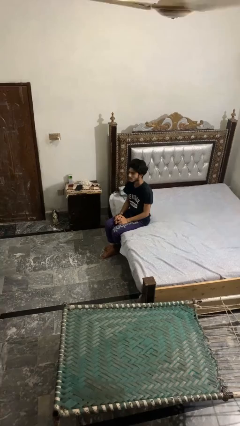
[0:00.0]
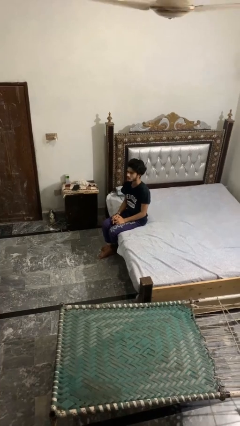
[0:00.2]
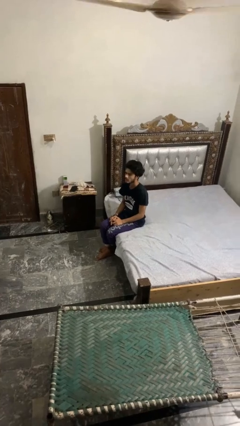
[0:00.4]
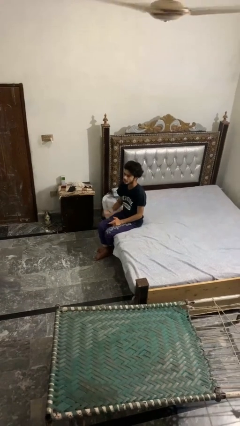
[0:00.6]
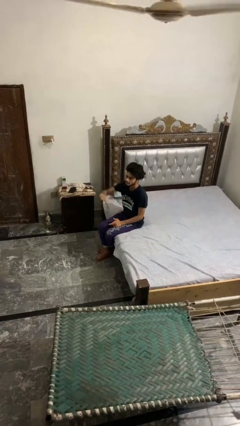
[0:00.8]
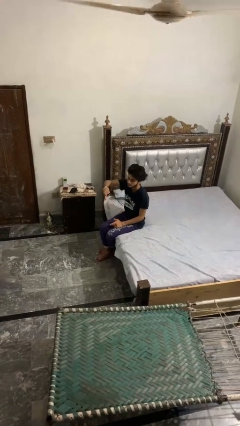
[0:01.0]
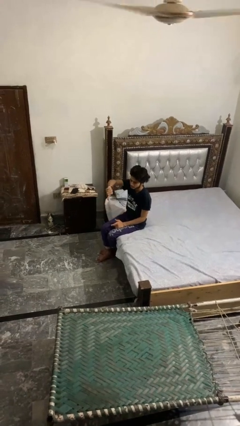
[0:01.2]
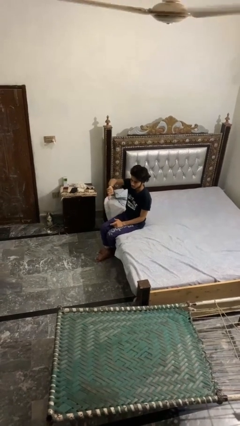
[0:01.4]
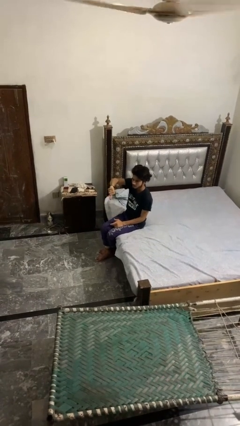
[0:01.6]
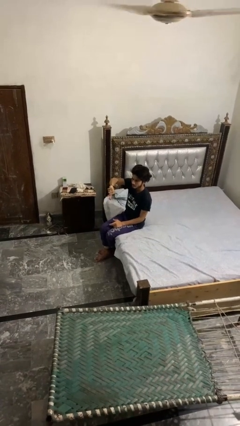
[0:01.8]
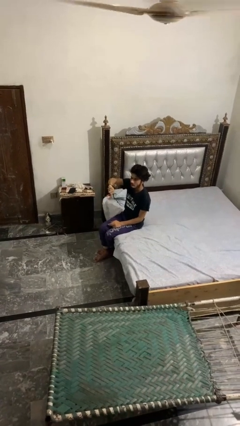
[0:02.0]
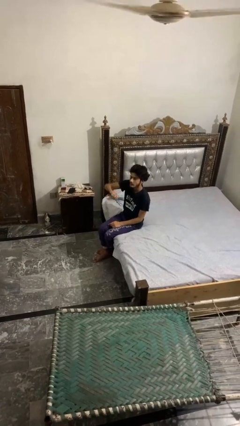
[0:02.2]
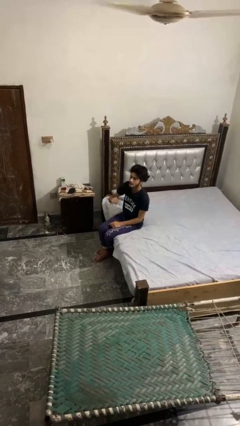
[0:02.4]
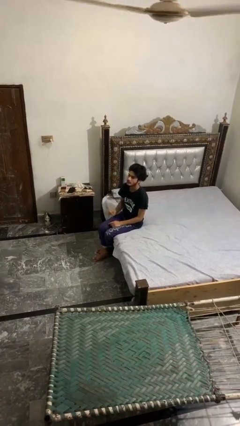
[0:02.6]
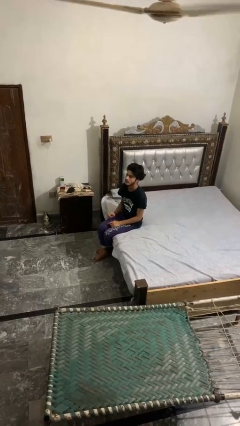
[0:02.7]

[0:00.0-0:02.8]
person gestures thumbs down

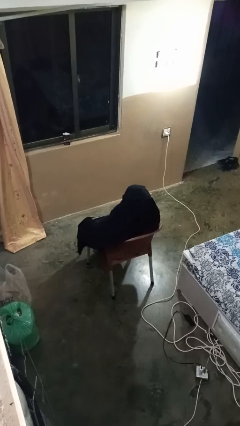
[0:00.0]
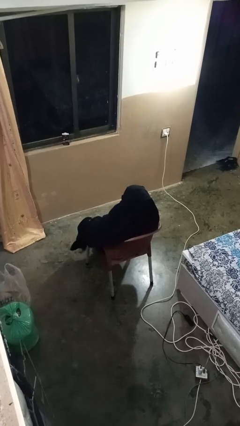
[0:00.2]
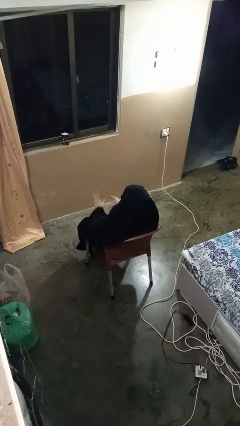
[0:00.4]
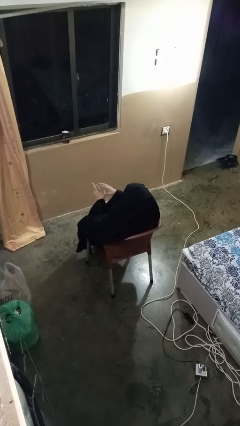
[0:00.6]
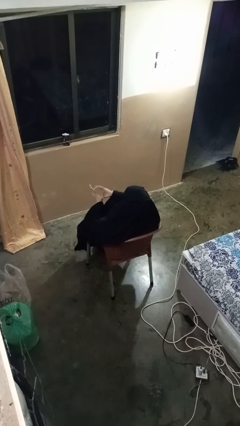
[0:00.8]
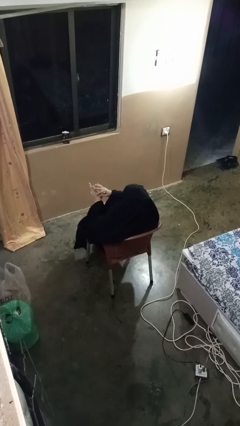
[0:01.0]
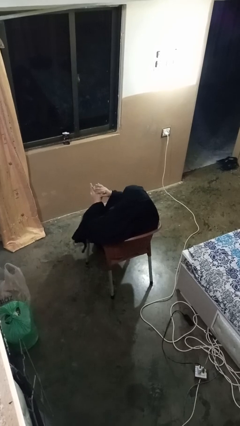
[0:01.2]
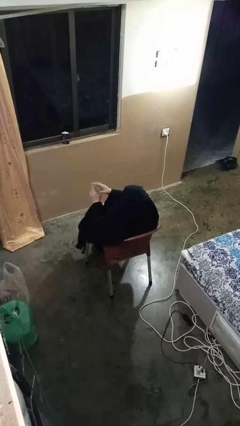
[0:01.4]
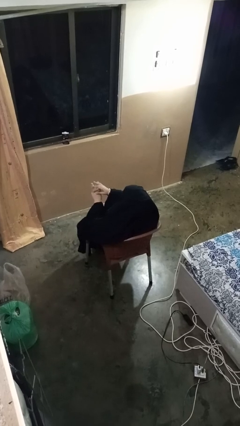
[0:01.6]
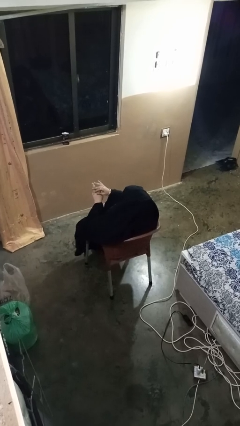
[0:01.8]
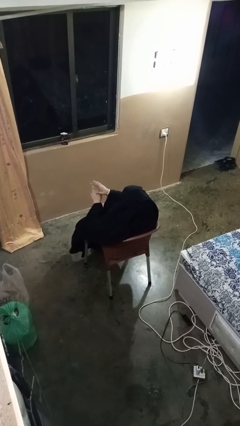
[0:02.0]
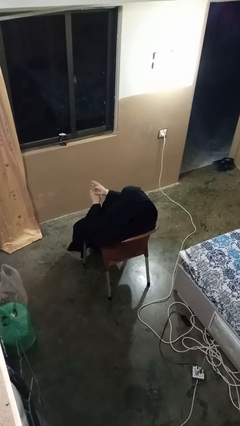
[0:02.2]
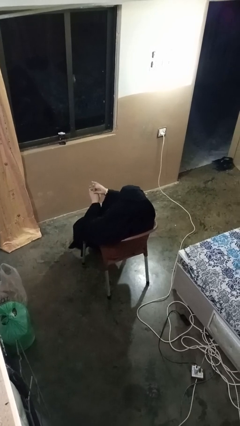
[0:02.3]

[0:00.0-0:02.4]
person cracks knuckles

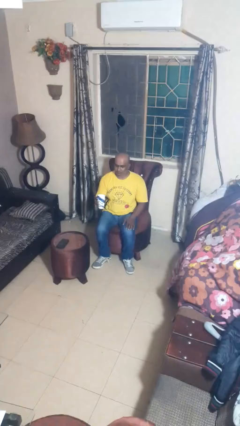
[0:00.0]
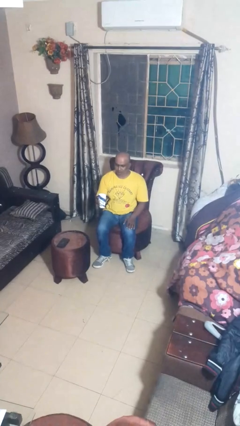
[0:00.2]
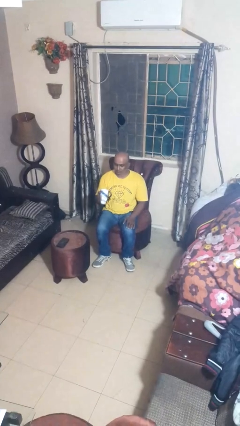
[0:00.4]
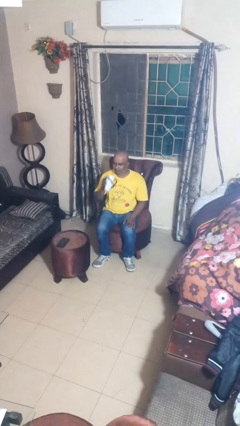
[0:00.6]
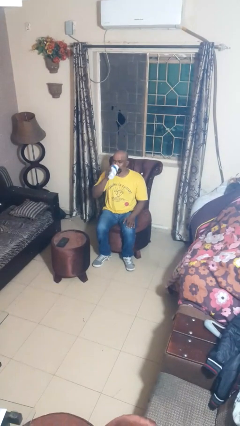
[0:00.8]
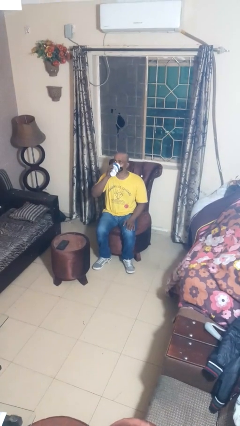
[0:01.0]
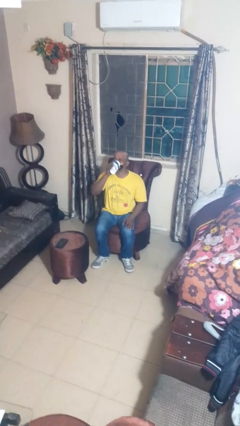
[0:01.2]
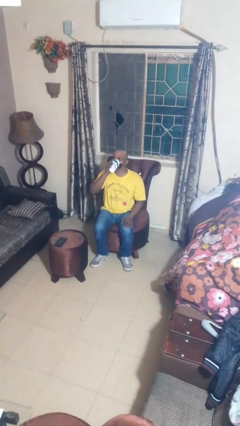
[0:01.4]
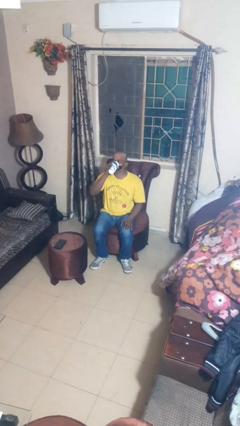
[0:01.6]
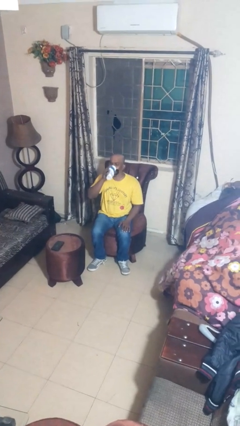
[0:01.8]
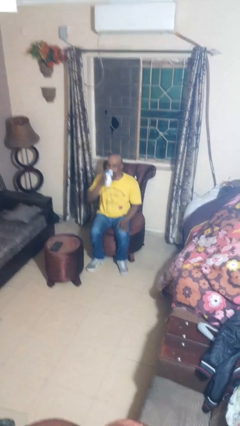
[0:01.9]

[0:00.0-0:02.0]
person drinks from mug

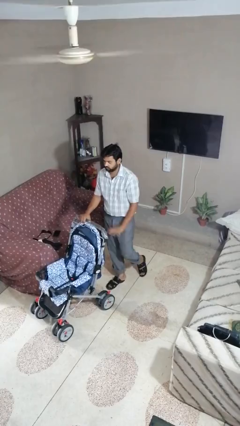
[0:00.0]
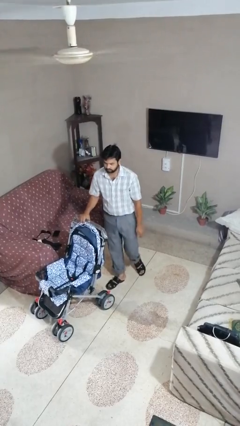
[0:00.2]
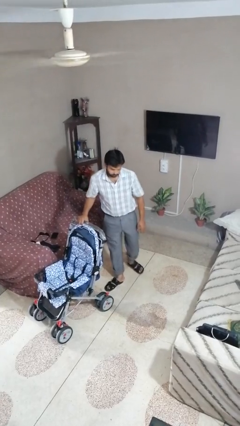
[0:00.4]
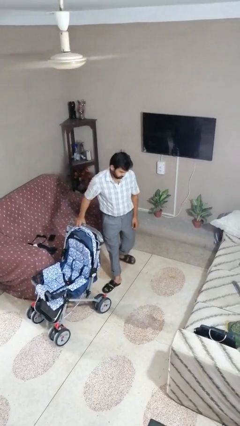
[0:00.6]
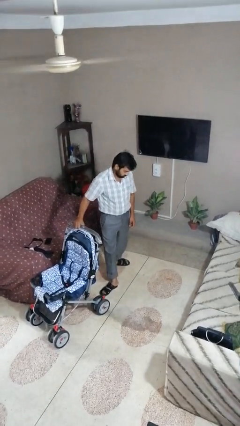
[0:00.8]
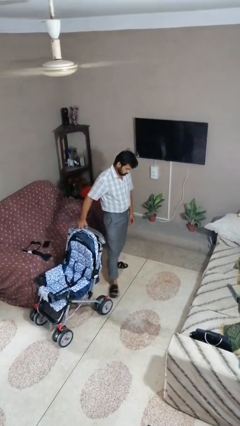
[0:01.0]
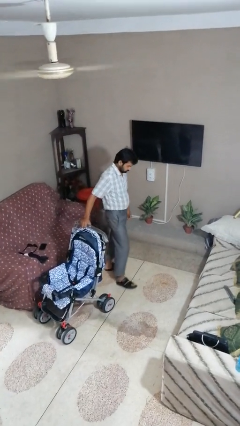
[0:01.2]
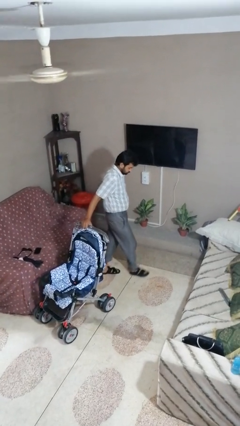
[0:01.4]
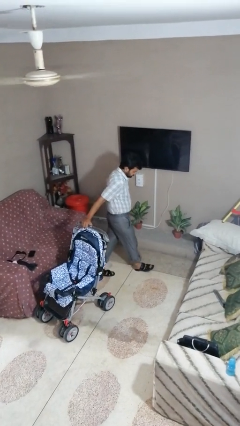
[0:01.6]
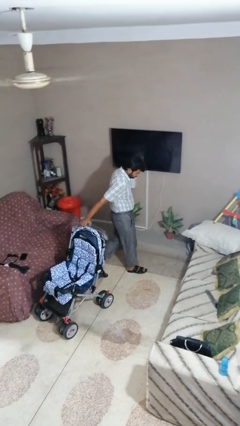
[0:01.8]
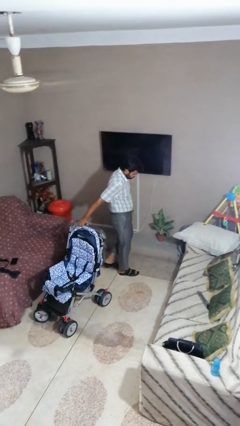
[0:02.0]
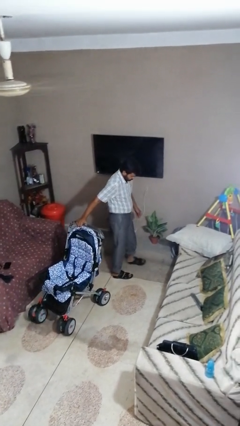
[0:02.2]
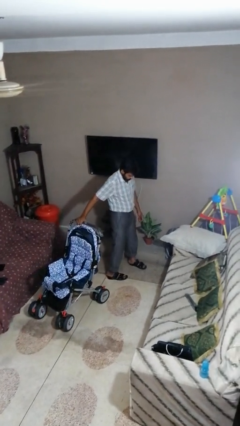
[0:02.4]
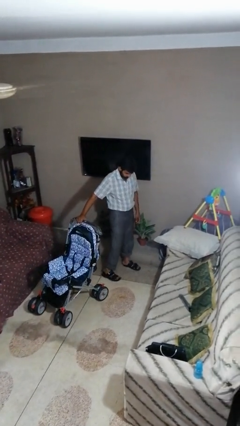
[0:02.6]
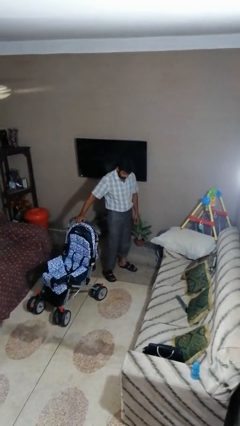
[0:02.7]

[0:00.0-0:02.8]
person pulls wheeled cart

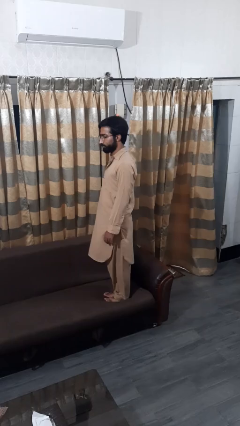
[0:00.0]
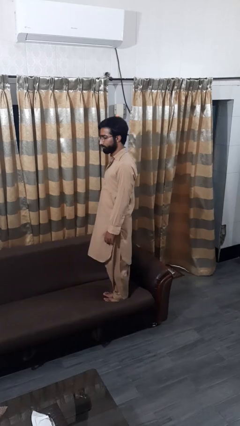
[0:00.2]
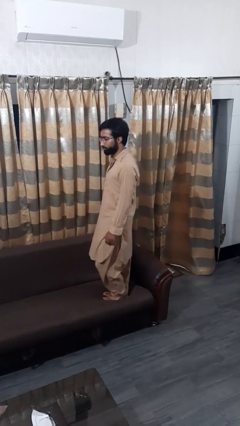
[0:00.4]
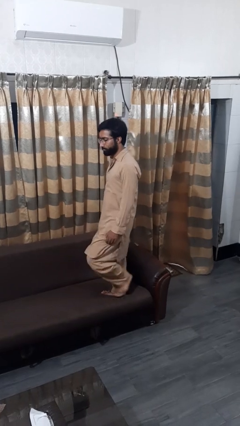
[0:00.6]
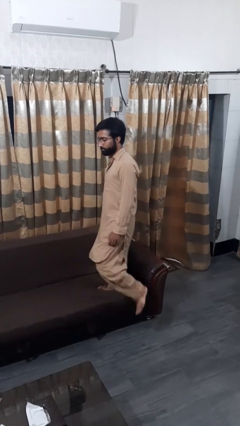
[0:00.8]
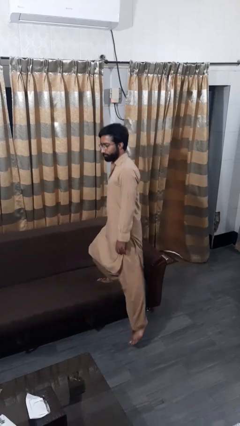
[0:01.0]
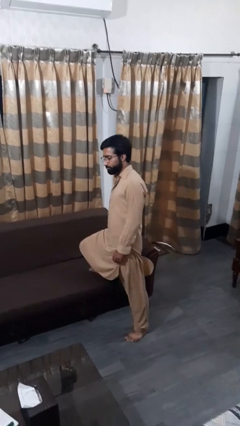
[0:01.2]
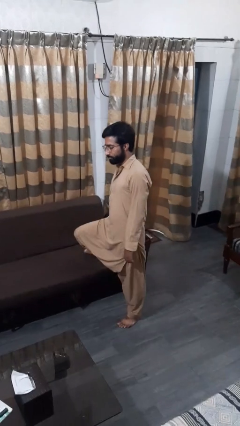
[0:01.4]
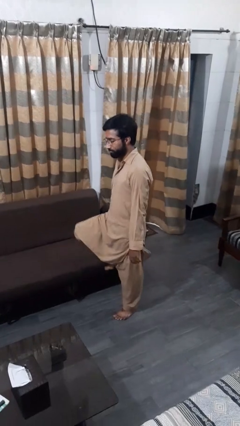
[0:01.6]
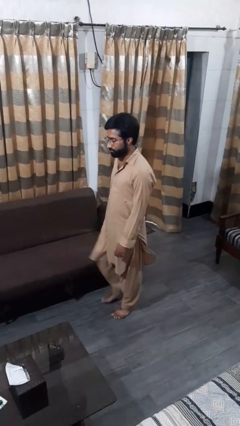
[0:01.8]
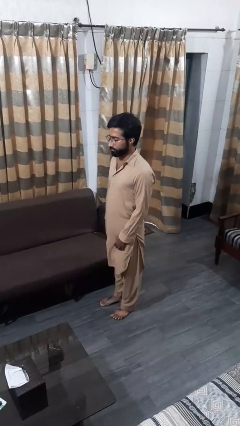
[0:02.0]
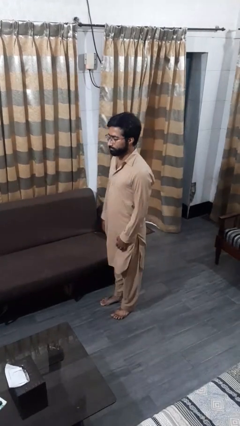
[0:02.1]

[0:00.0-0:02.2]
person climbs off couch

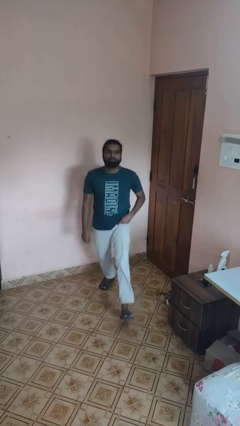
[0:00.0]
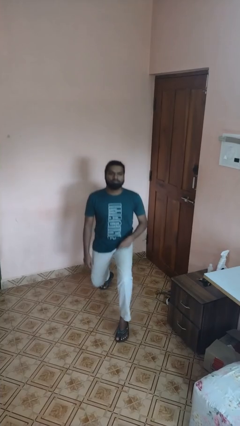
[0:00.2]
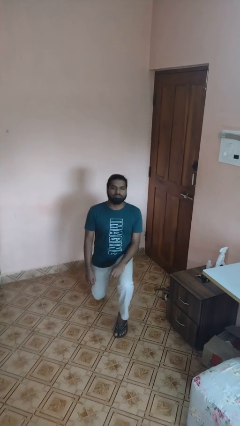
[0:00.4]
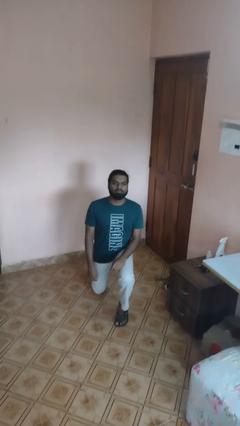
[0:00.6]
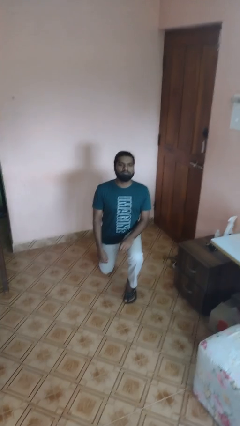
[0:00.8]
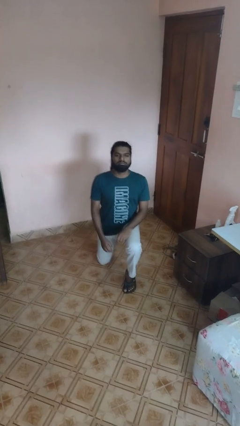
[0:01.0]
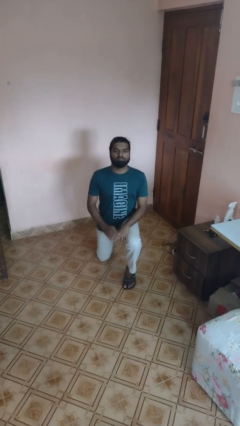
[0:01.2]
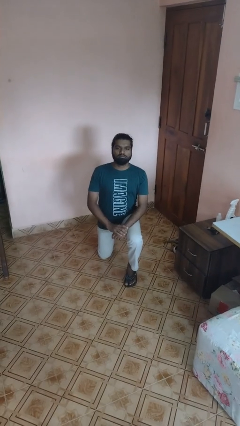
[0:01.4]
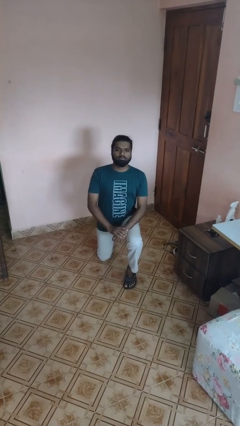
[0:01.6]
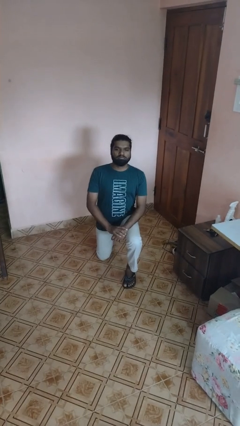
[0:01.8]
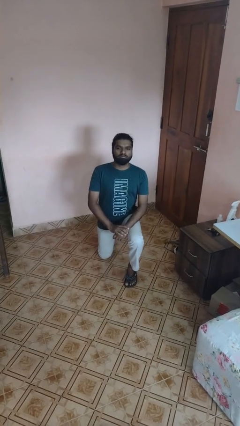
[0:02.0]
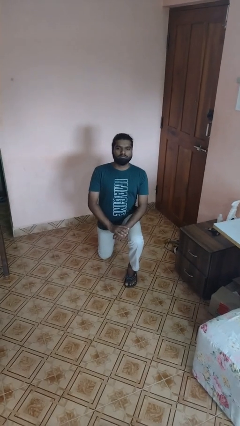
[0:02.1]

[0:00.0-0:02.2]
person kneels

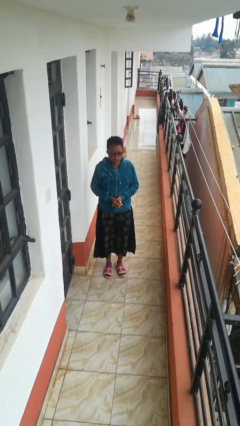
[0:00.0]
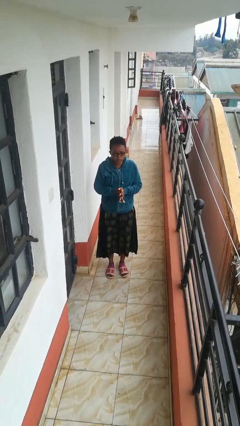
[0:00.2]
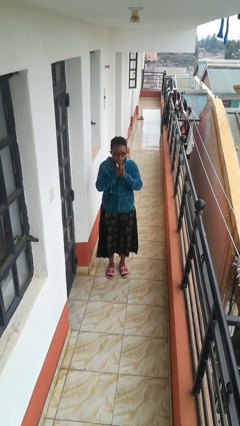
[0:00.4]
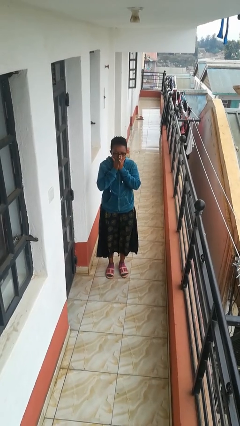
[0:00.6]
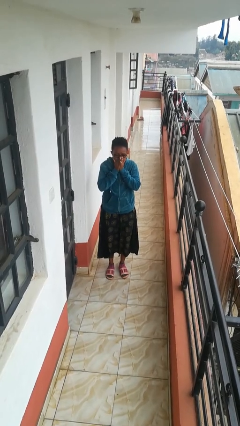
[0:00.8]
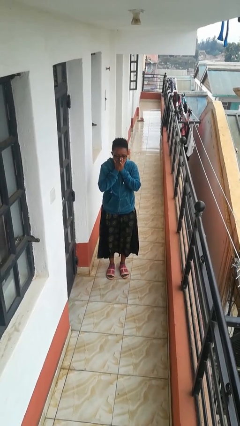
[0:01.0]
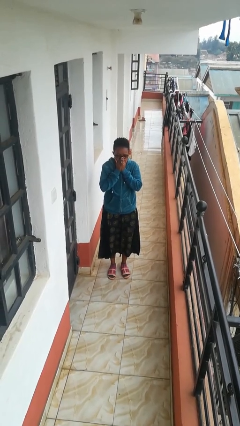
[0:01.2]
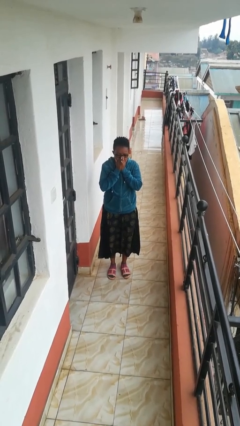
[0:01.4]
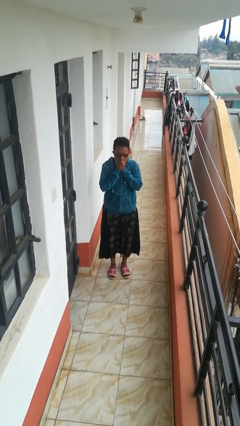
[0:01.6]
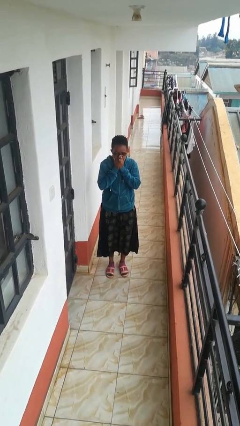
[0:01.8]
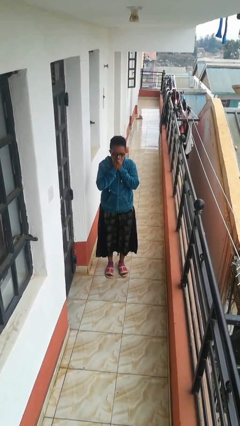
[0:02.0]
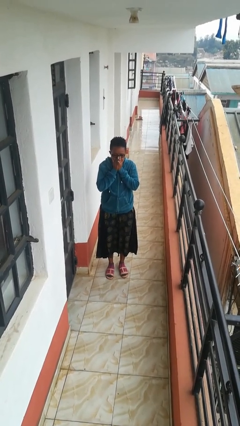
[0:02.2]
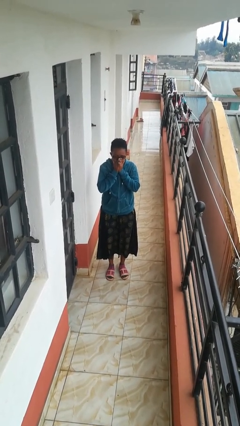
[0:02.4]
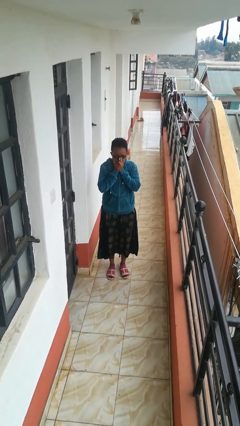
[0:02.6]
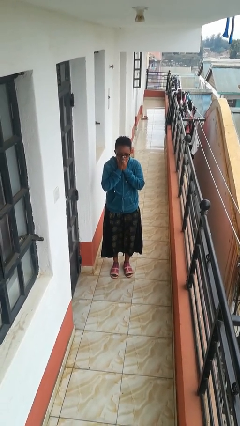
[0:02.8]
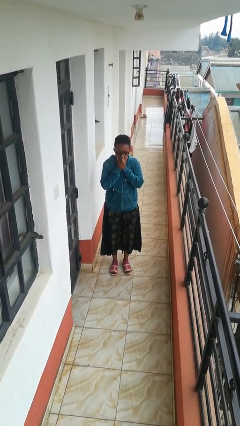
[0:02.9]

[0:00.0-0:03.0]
person blows into hands
